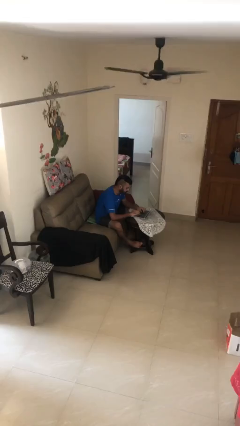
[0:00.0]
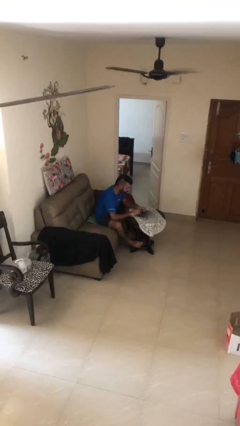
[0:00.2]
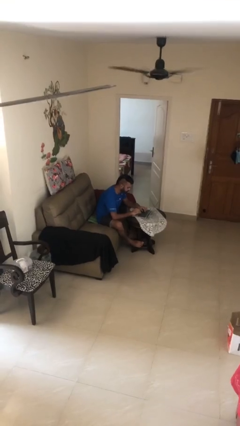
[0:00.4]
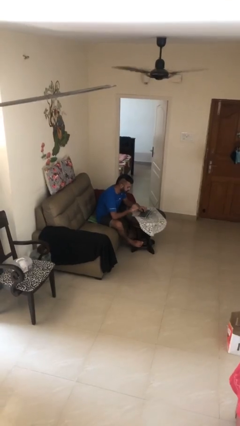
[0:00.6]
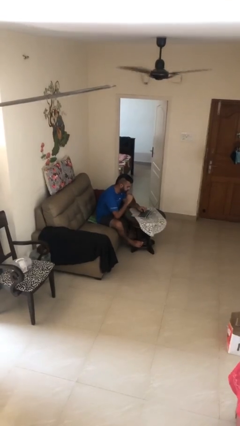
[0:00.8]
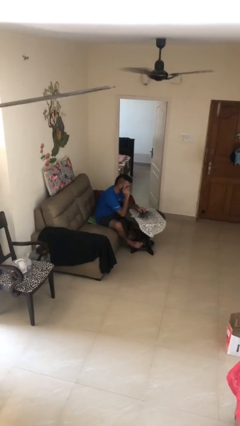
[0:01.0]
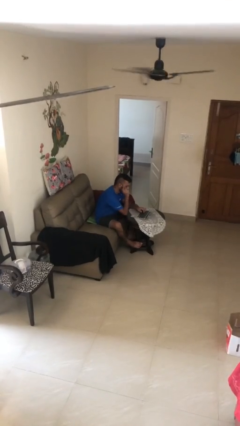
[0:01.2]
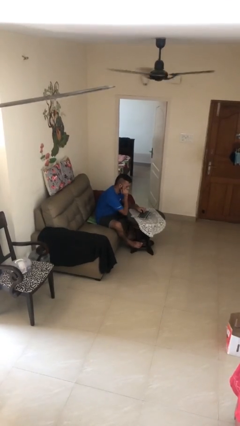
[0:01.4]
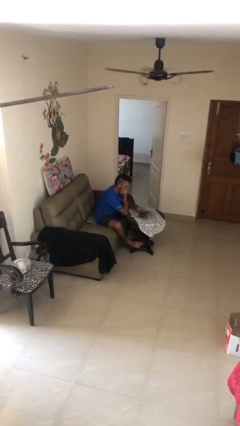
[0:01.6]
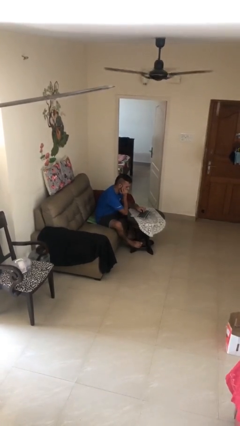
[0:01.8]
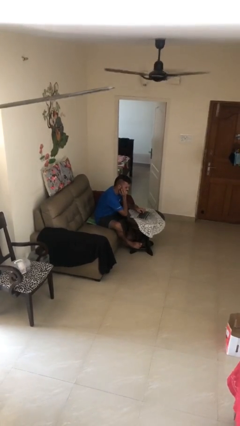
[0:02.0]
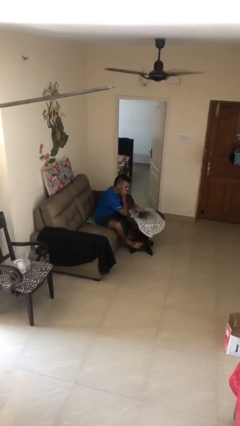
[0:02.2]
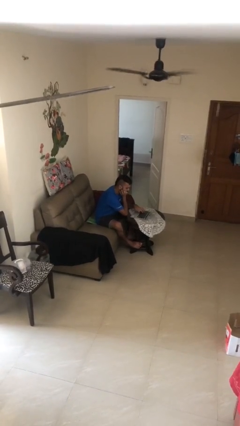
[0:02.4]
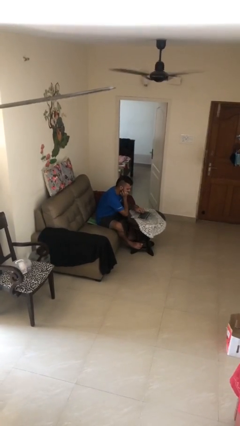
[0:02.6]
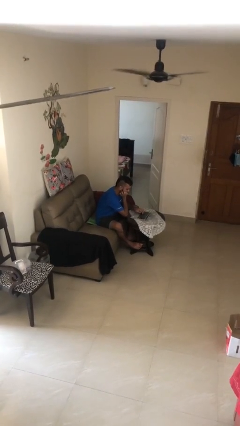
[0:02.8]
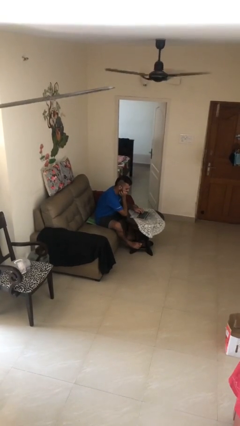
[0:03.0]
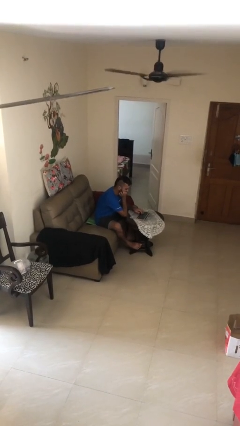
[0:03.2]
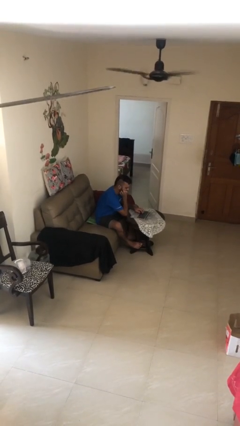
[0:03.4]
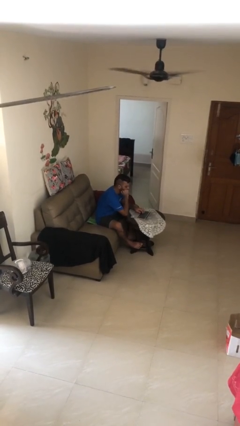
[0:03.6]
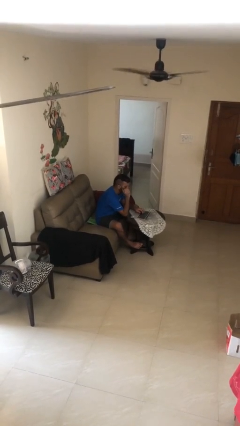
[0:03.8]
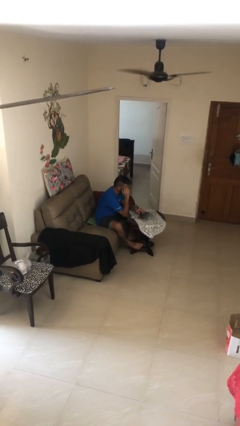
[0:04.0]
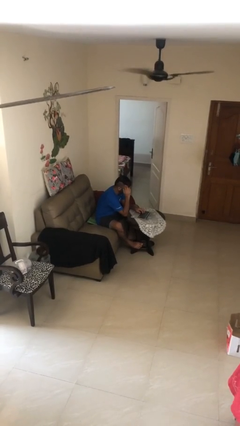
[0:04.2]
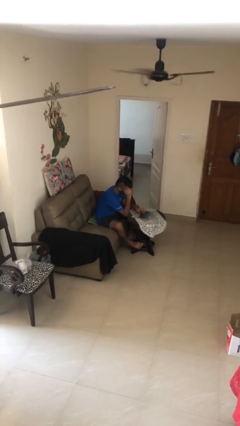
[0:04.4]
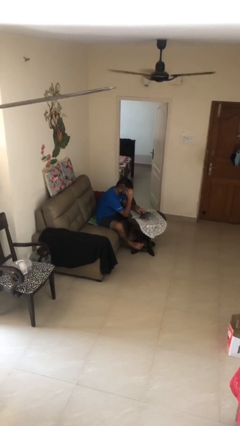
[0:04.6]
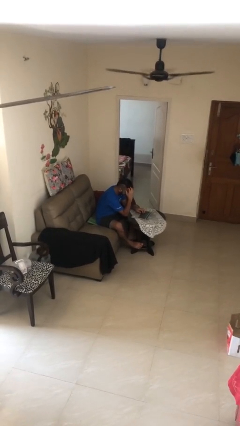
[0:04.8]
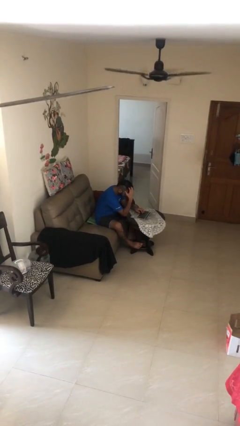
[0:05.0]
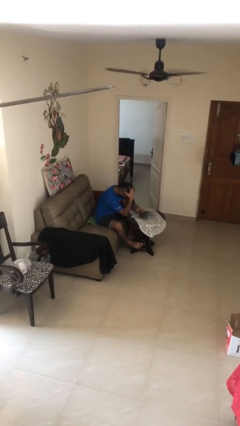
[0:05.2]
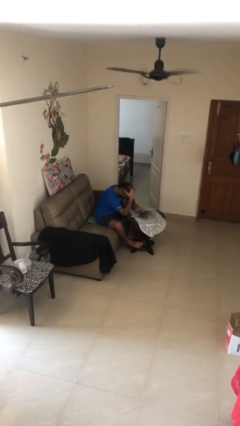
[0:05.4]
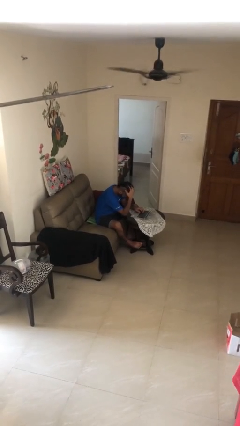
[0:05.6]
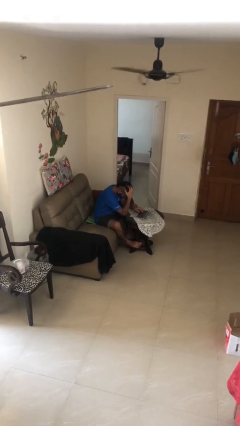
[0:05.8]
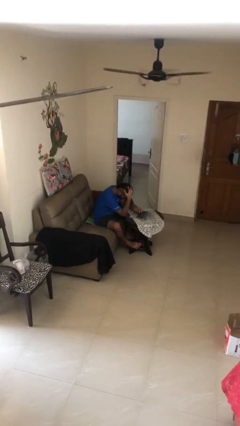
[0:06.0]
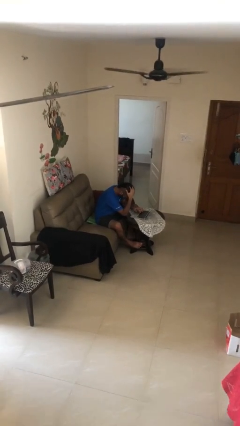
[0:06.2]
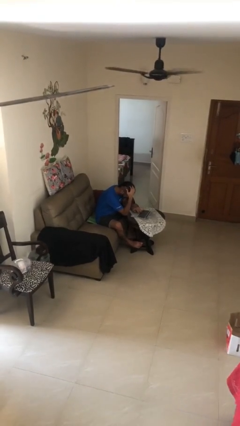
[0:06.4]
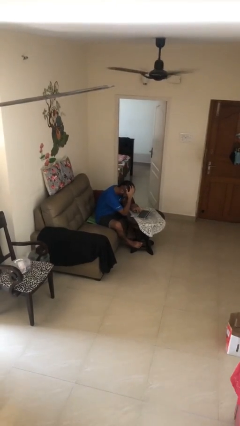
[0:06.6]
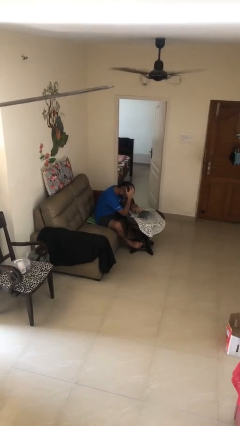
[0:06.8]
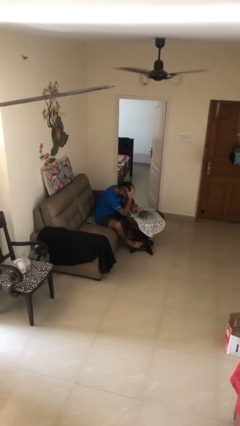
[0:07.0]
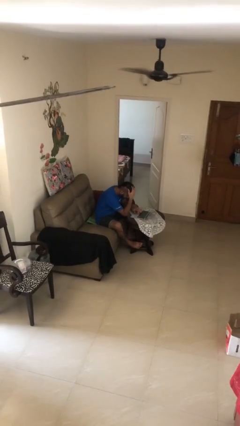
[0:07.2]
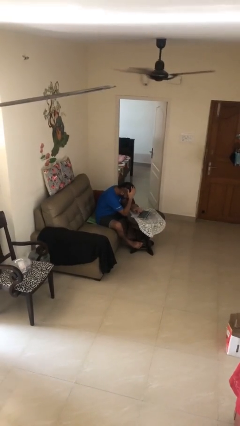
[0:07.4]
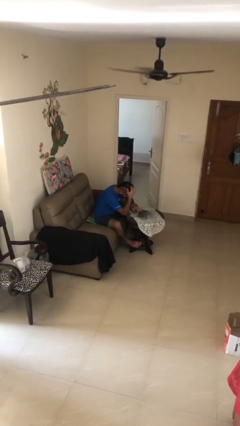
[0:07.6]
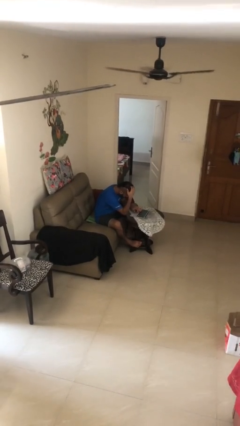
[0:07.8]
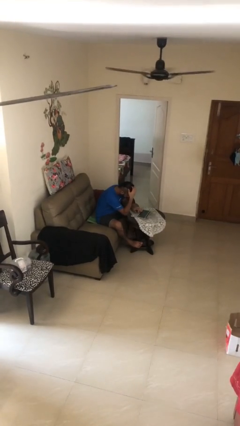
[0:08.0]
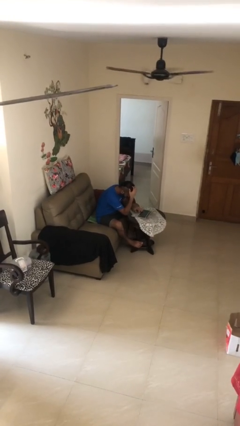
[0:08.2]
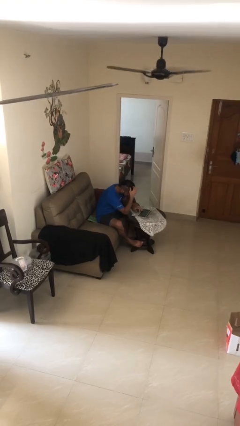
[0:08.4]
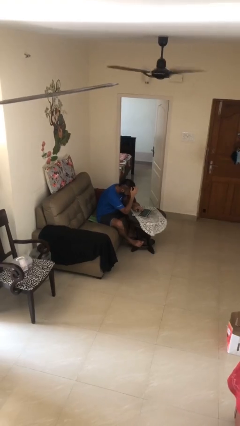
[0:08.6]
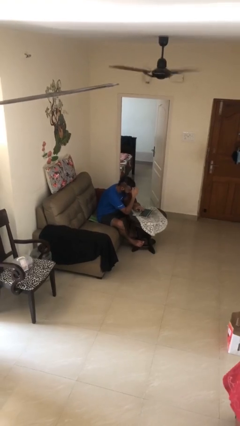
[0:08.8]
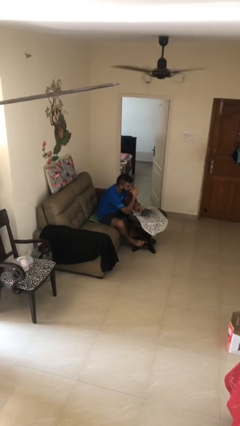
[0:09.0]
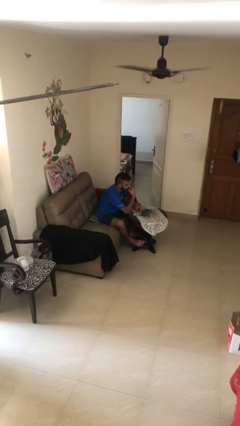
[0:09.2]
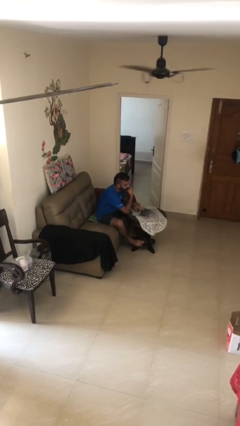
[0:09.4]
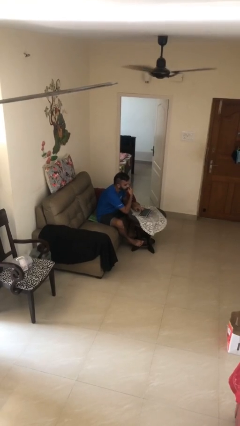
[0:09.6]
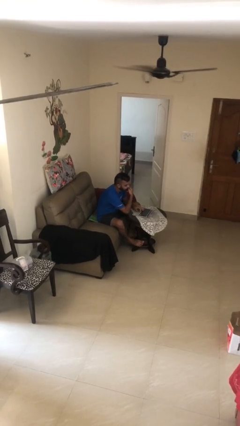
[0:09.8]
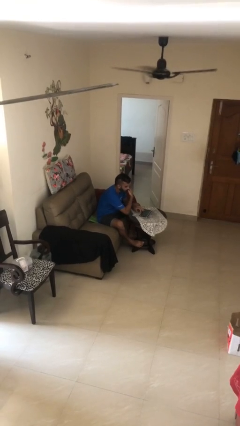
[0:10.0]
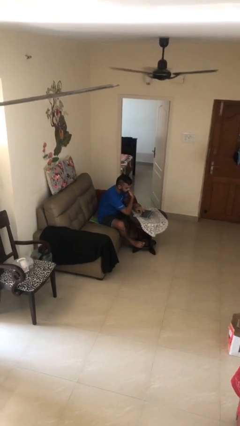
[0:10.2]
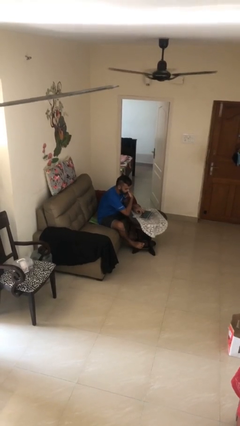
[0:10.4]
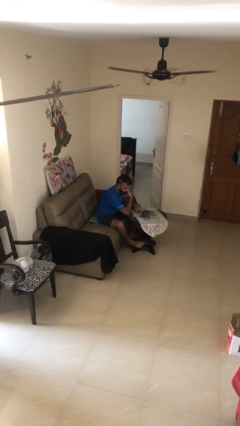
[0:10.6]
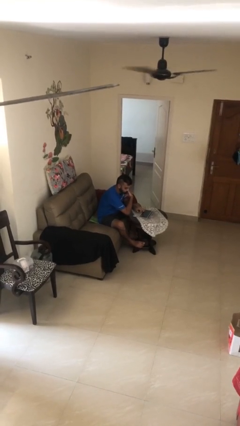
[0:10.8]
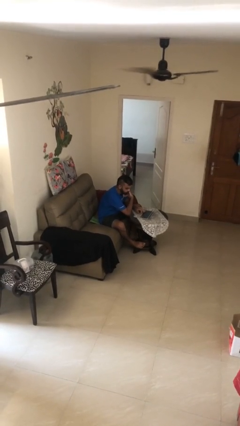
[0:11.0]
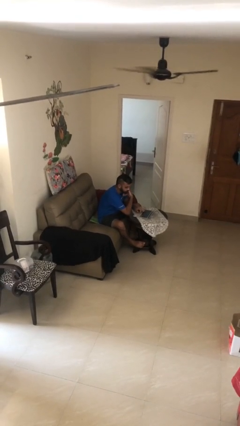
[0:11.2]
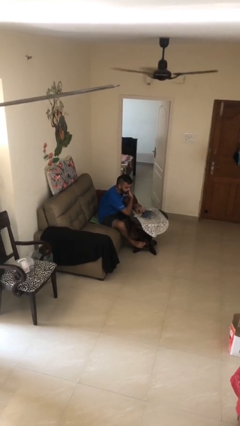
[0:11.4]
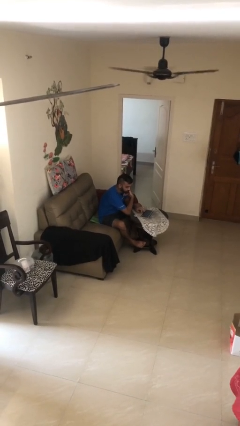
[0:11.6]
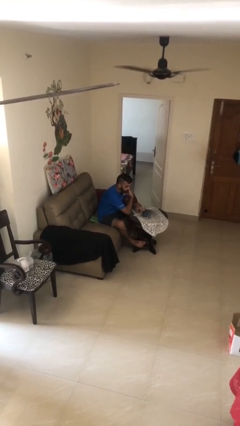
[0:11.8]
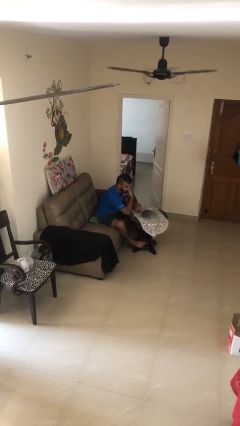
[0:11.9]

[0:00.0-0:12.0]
person interacts with laptop

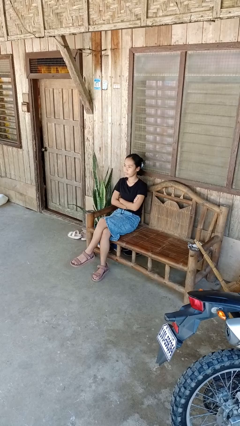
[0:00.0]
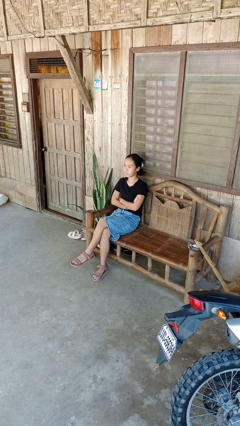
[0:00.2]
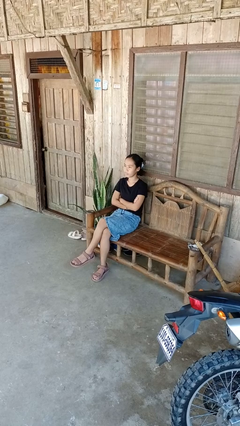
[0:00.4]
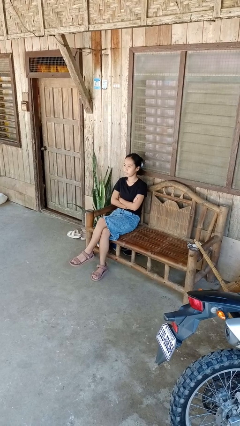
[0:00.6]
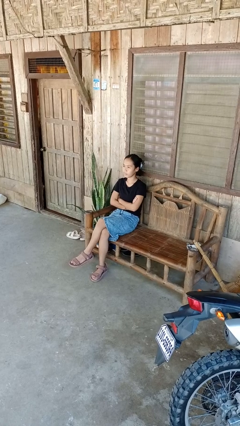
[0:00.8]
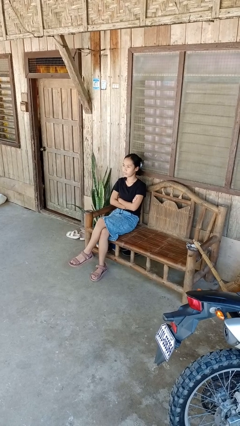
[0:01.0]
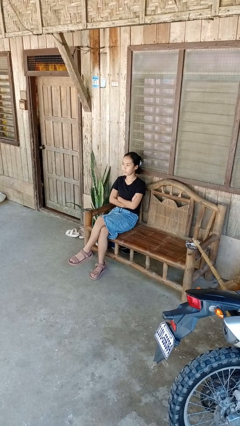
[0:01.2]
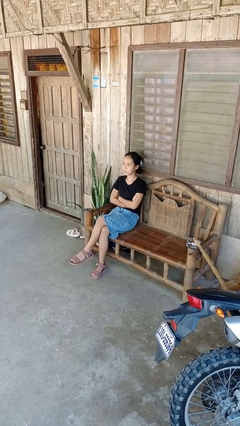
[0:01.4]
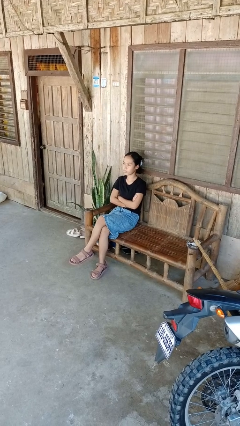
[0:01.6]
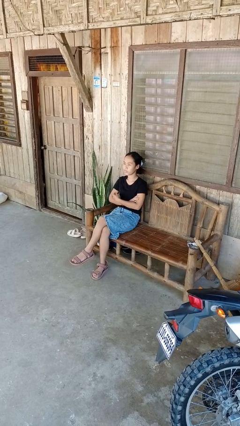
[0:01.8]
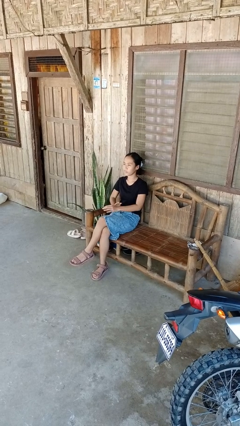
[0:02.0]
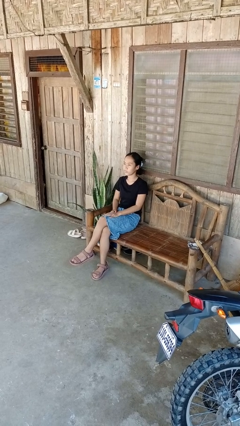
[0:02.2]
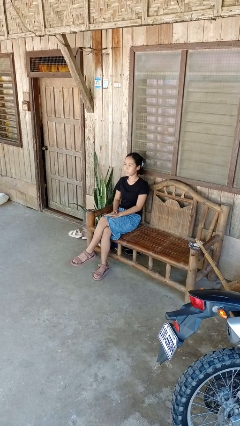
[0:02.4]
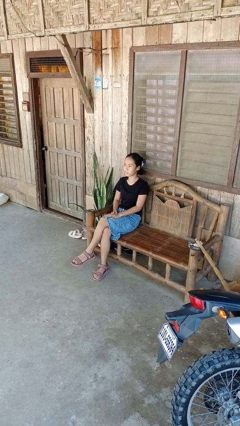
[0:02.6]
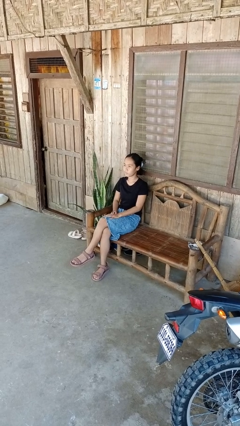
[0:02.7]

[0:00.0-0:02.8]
person crosses arms

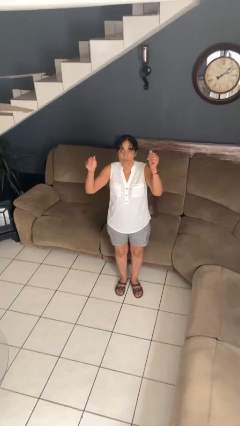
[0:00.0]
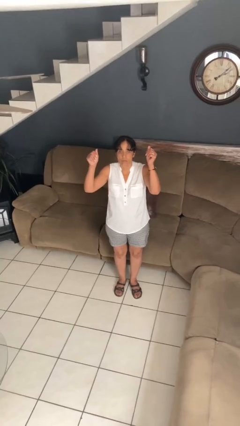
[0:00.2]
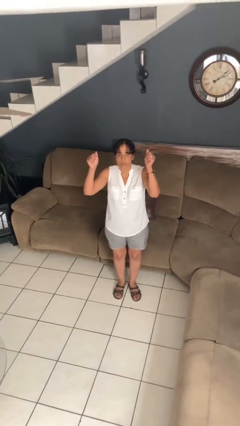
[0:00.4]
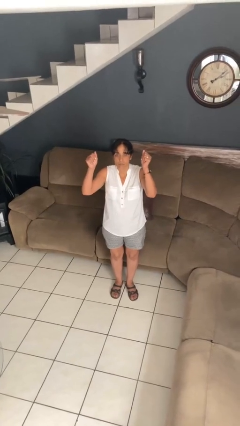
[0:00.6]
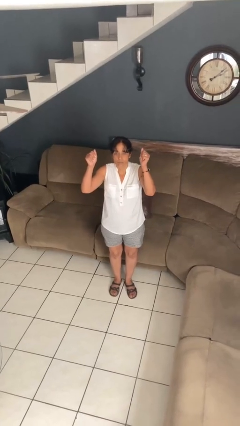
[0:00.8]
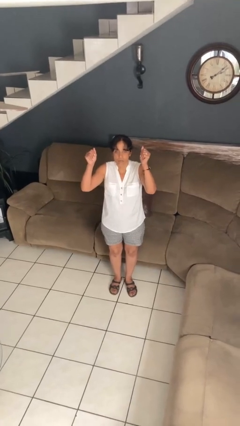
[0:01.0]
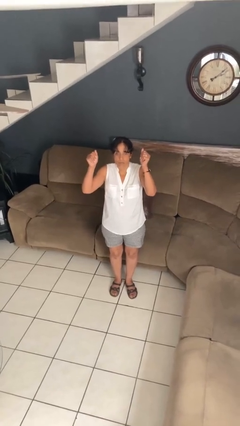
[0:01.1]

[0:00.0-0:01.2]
person gestures zoom in

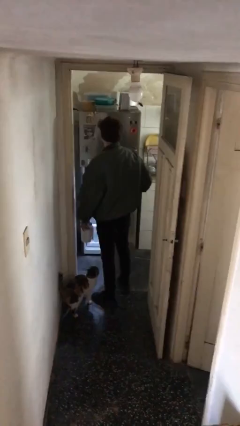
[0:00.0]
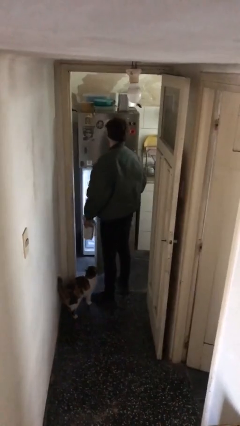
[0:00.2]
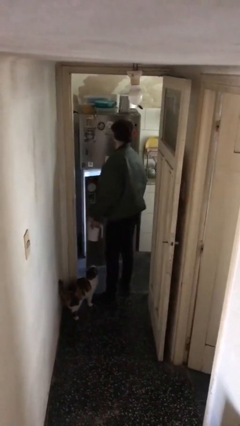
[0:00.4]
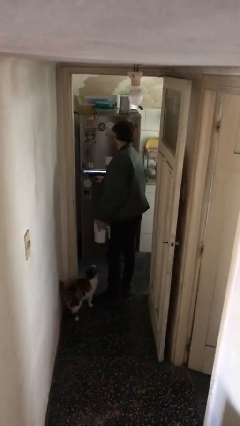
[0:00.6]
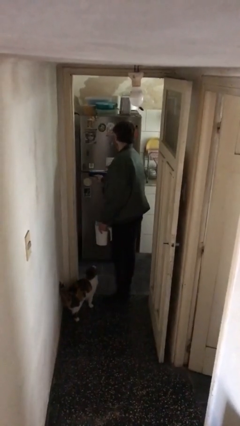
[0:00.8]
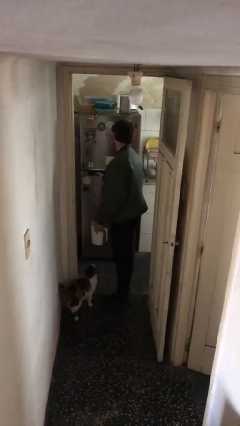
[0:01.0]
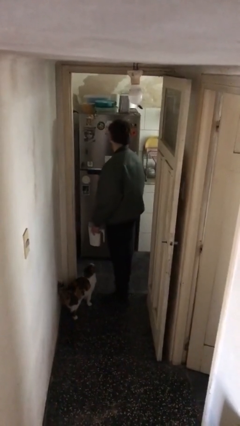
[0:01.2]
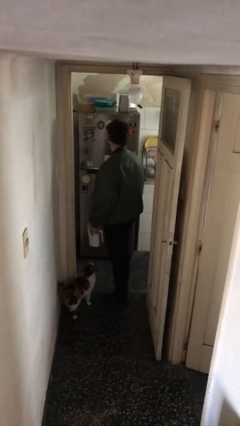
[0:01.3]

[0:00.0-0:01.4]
person closes refrigerator

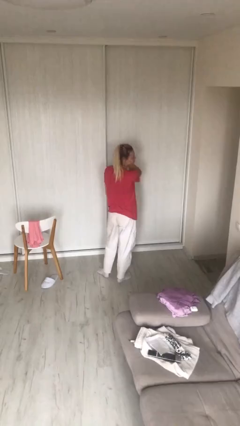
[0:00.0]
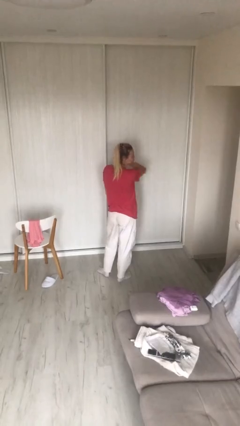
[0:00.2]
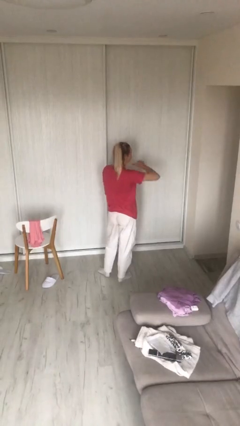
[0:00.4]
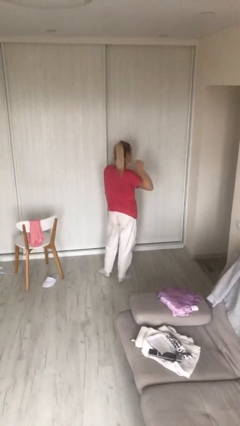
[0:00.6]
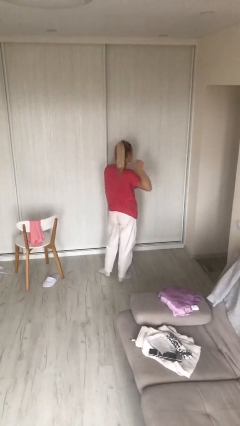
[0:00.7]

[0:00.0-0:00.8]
person gestures cut
